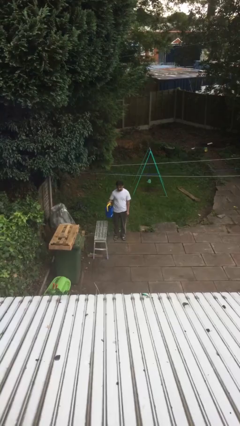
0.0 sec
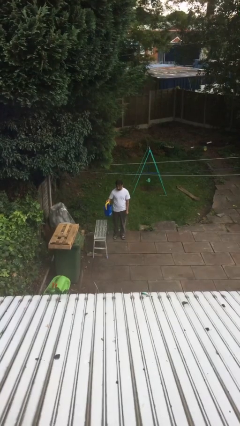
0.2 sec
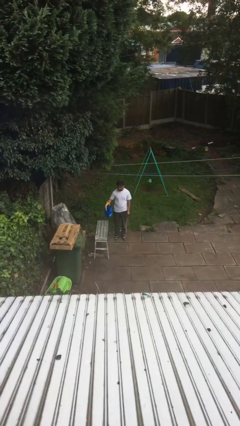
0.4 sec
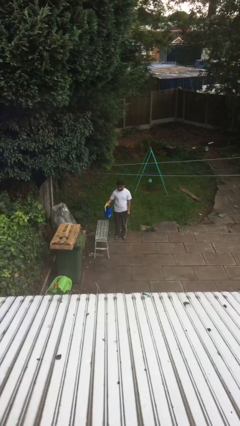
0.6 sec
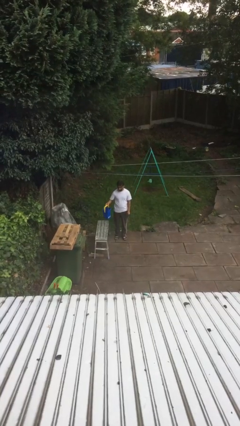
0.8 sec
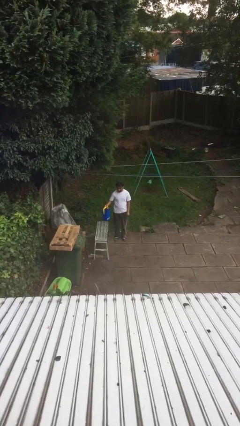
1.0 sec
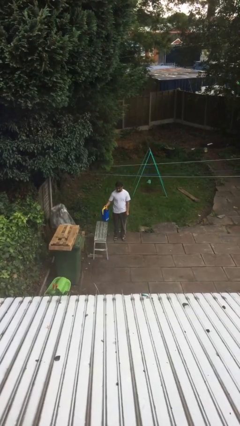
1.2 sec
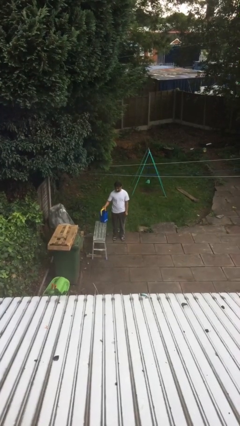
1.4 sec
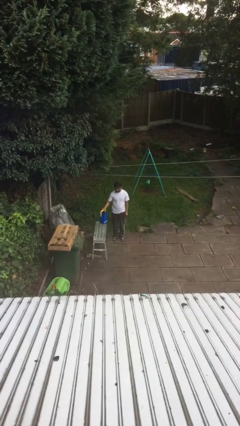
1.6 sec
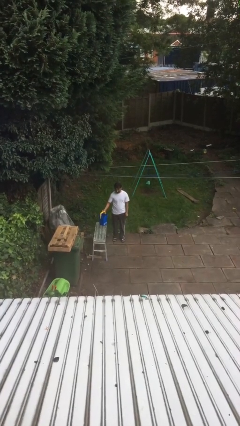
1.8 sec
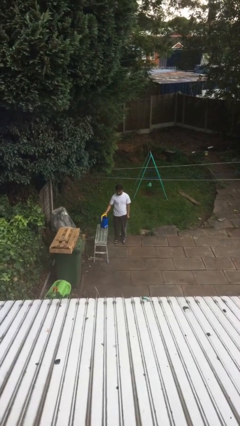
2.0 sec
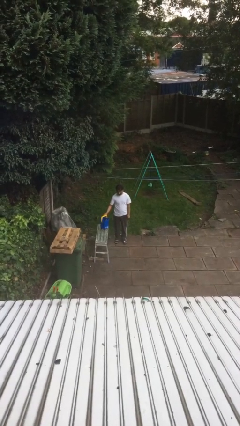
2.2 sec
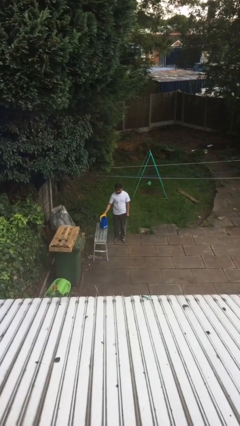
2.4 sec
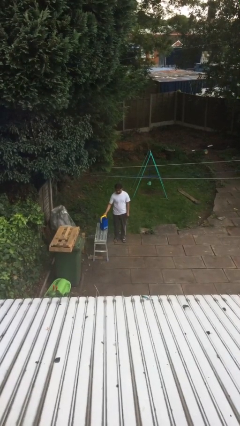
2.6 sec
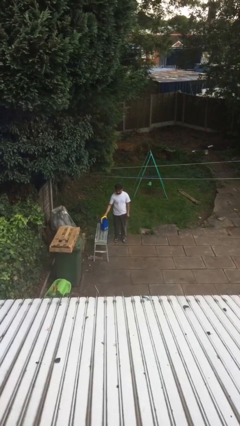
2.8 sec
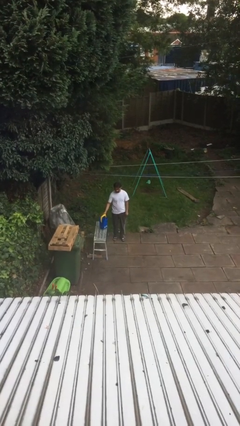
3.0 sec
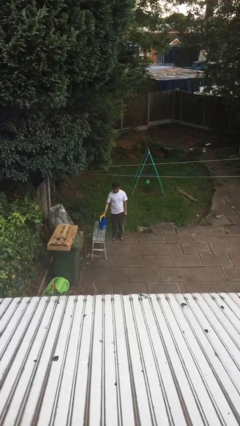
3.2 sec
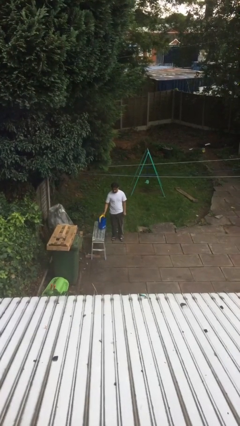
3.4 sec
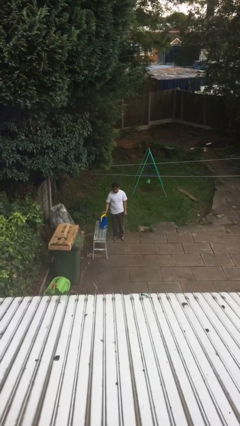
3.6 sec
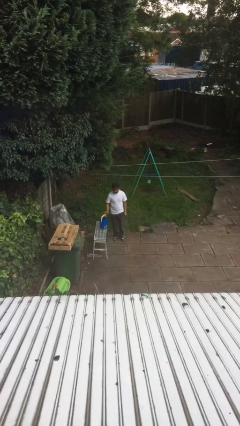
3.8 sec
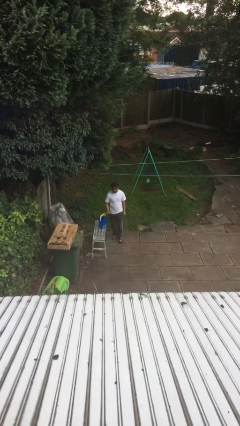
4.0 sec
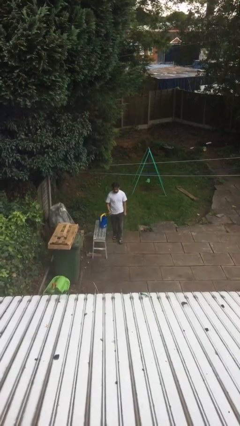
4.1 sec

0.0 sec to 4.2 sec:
person puts down object on table

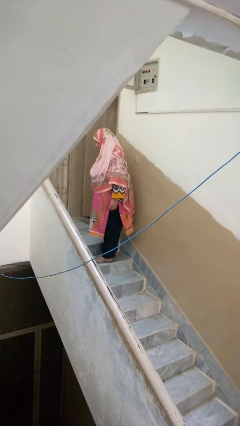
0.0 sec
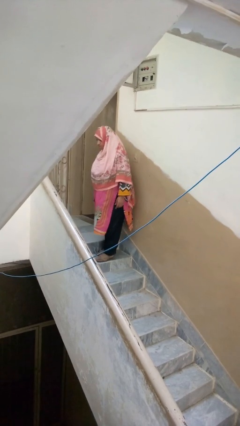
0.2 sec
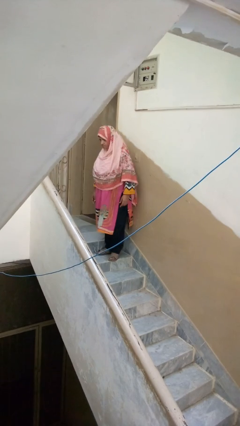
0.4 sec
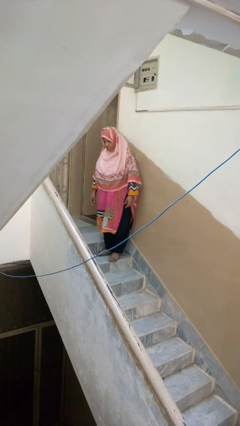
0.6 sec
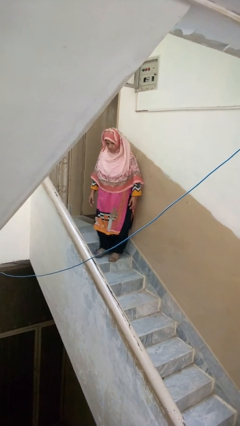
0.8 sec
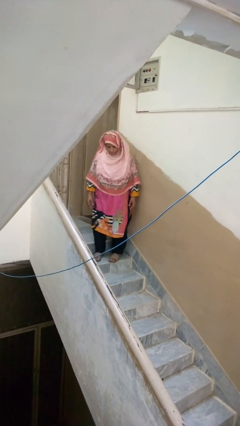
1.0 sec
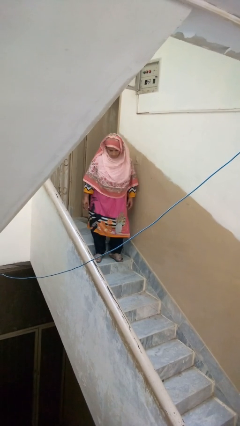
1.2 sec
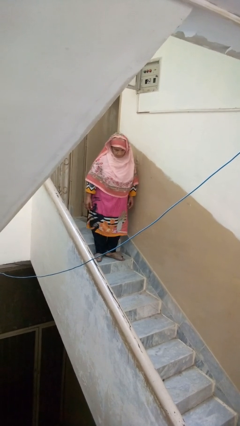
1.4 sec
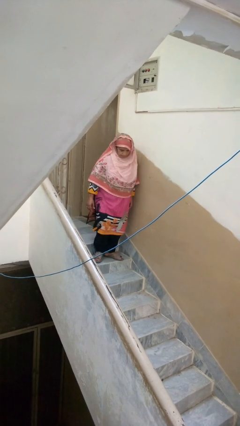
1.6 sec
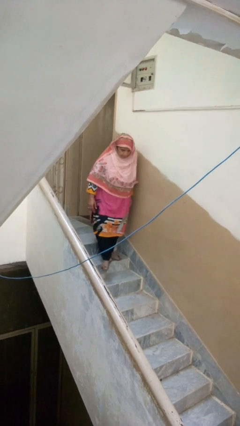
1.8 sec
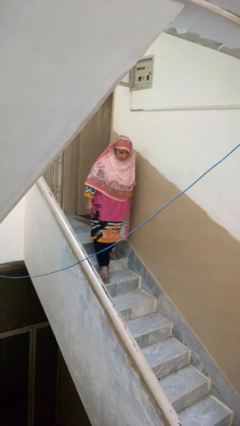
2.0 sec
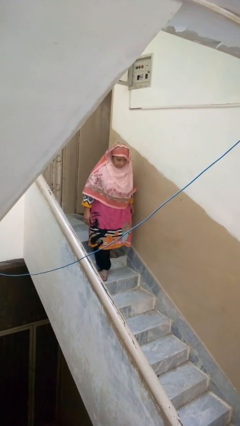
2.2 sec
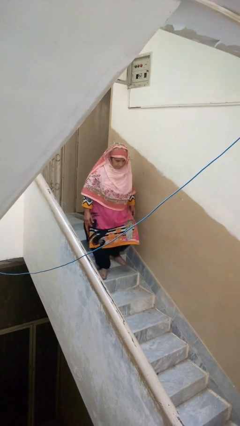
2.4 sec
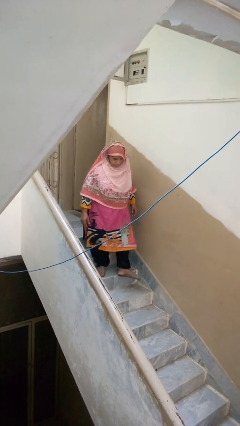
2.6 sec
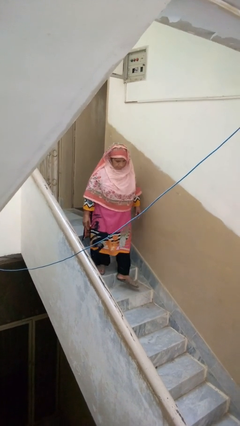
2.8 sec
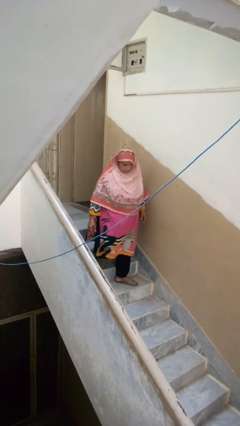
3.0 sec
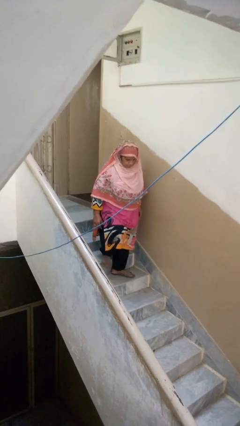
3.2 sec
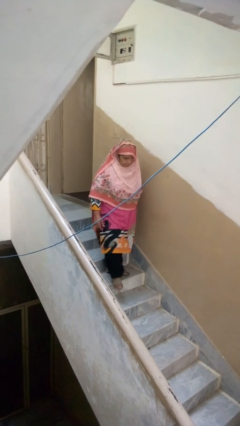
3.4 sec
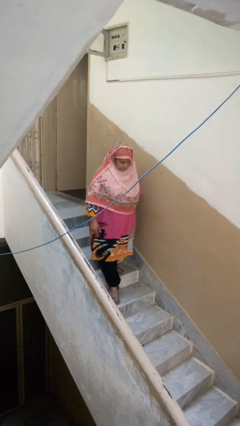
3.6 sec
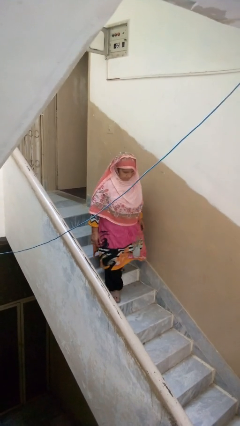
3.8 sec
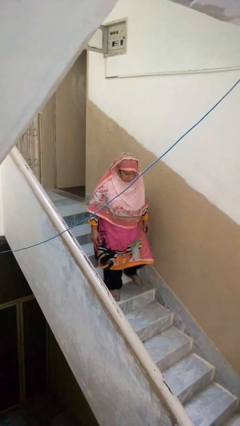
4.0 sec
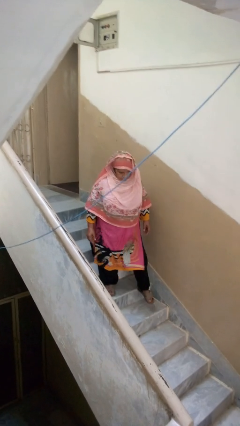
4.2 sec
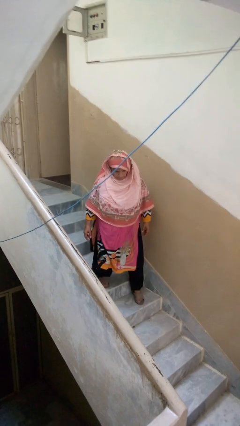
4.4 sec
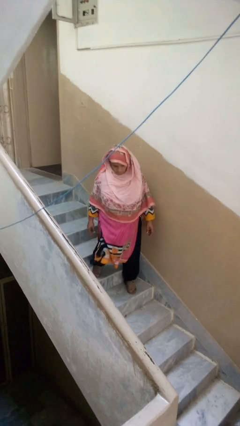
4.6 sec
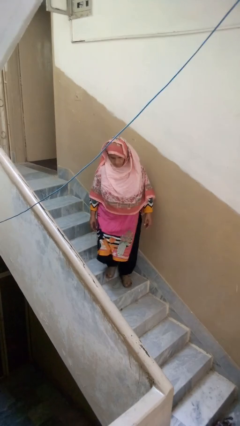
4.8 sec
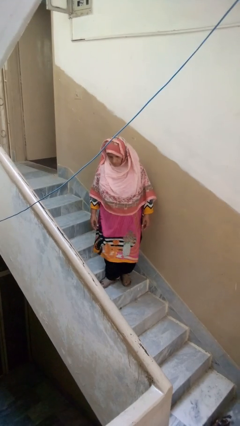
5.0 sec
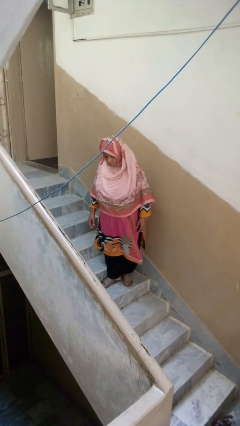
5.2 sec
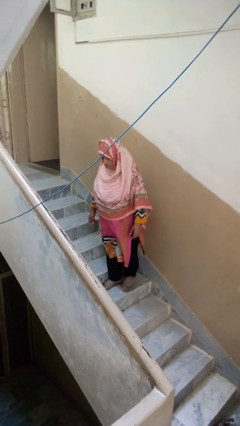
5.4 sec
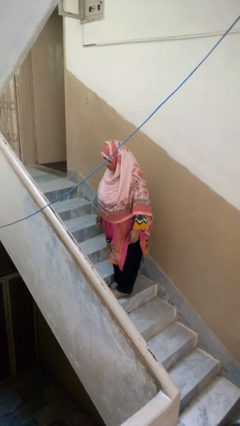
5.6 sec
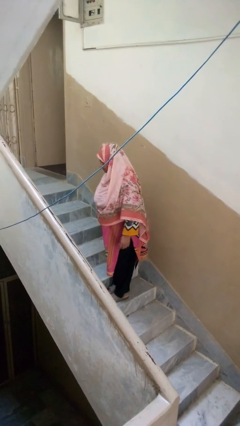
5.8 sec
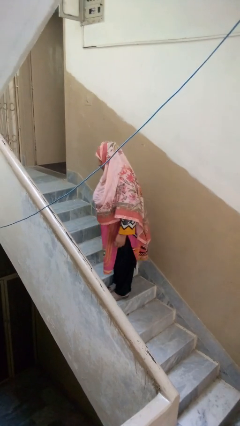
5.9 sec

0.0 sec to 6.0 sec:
person climbs down stairs

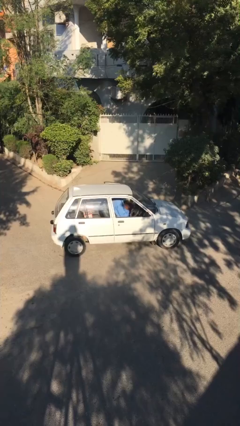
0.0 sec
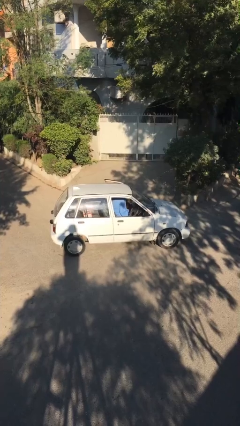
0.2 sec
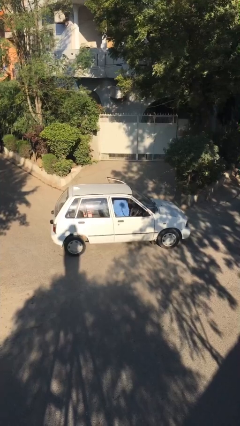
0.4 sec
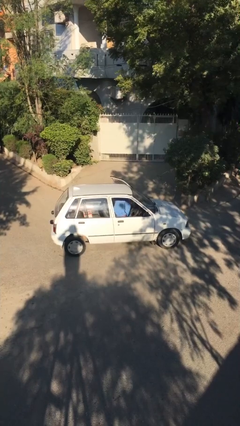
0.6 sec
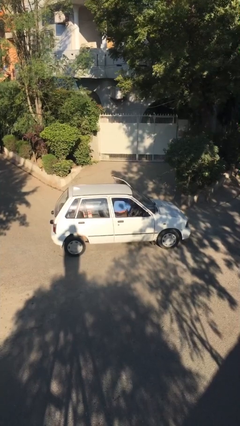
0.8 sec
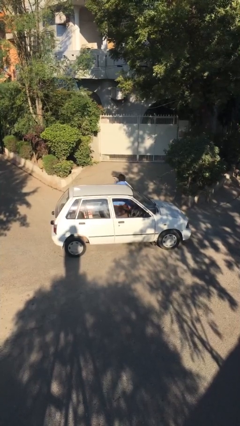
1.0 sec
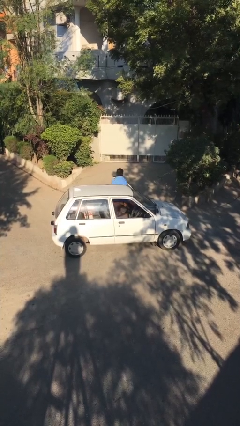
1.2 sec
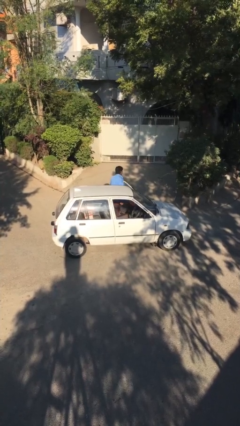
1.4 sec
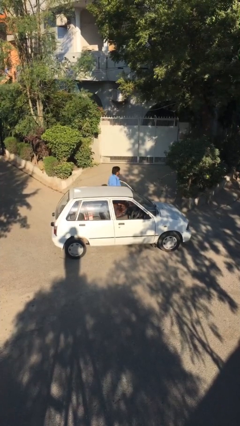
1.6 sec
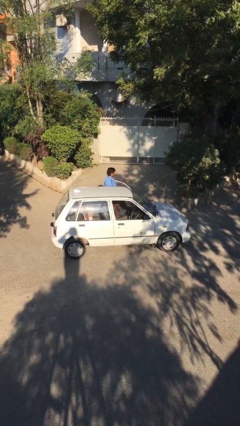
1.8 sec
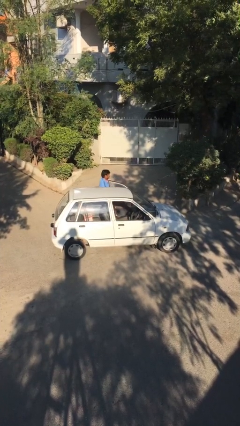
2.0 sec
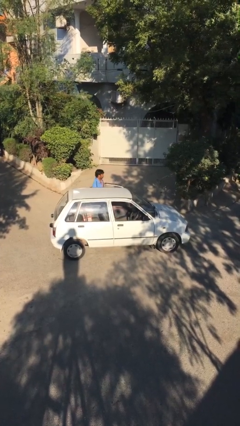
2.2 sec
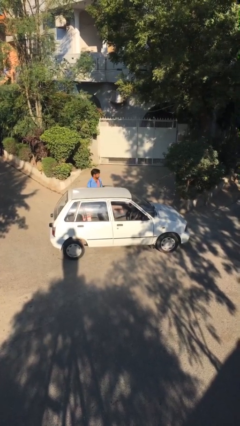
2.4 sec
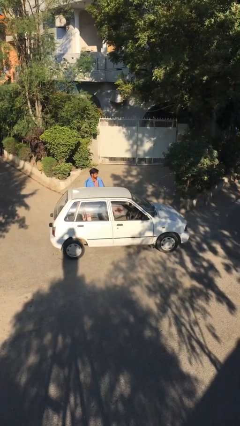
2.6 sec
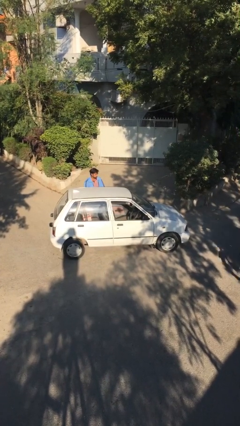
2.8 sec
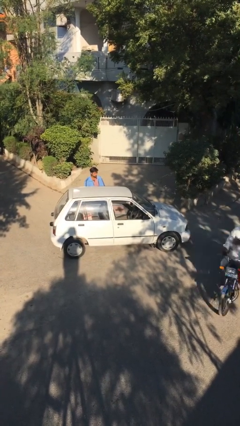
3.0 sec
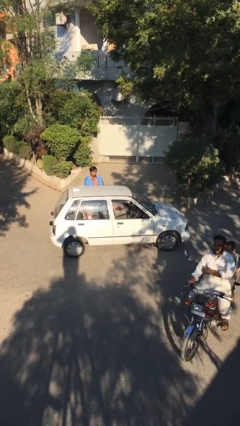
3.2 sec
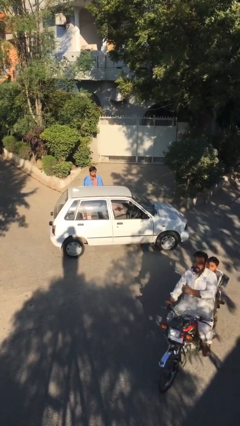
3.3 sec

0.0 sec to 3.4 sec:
car drops off person

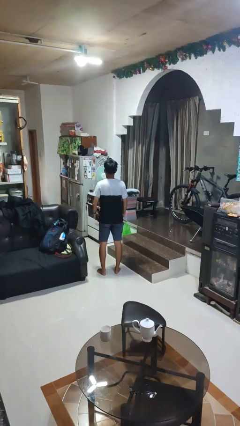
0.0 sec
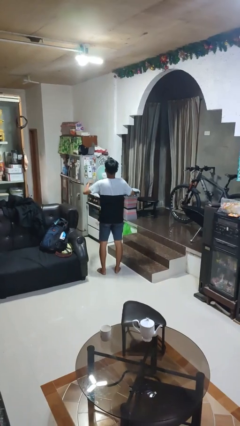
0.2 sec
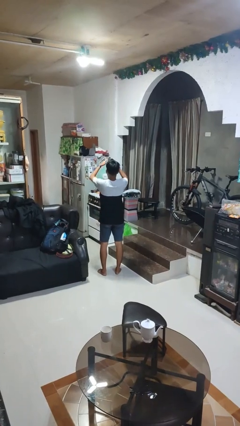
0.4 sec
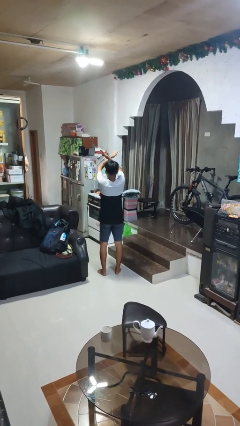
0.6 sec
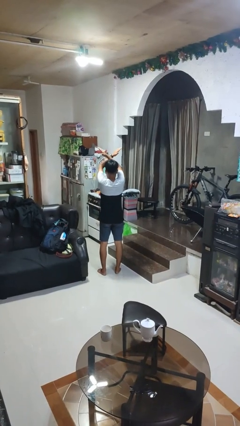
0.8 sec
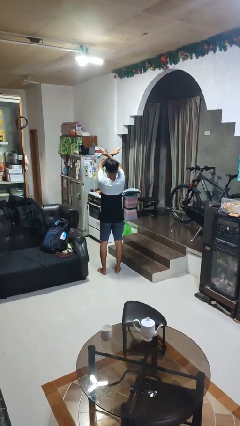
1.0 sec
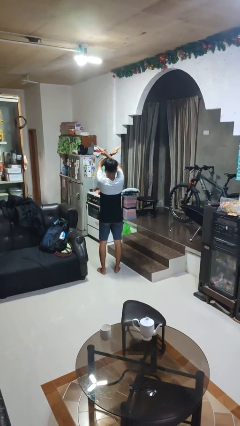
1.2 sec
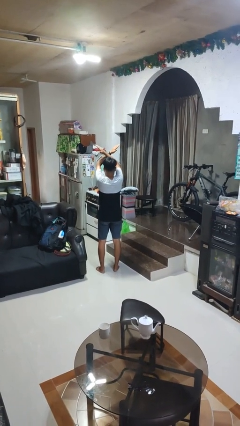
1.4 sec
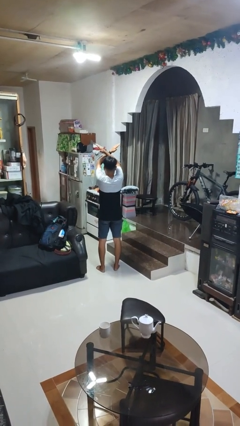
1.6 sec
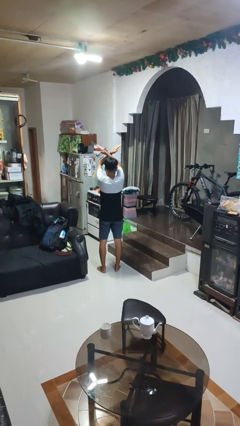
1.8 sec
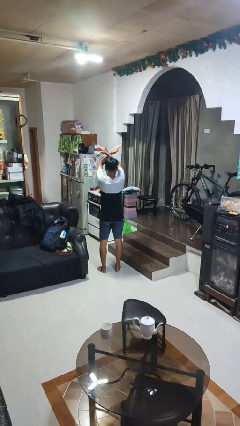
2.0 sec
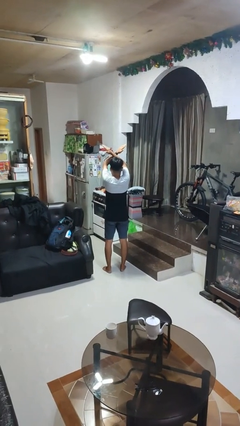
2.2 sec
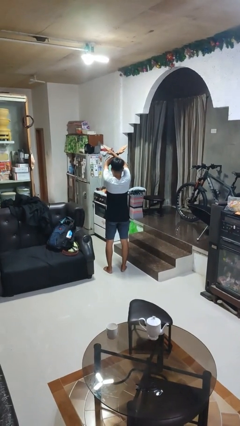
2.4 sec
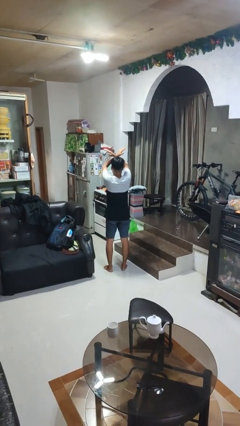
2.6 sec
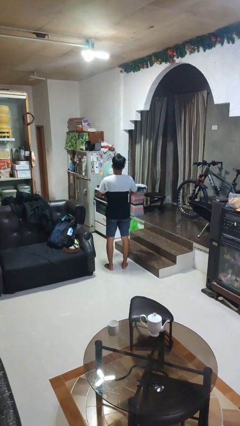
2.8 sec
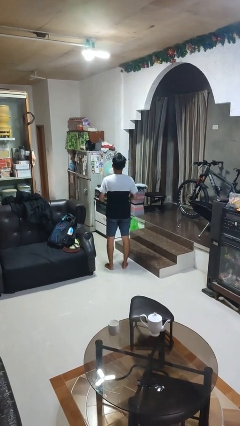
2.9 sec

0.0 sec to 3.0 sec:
person gestures arms x

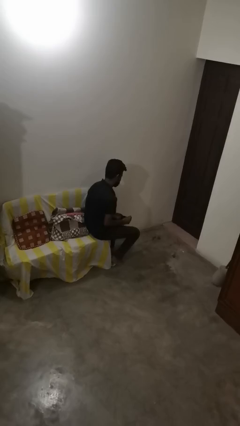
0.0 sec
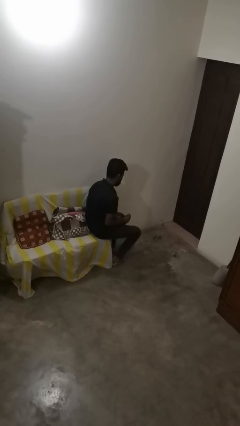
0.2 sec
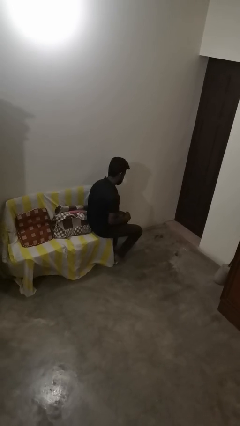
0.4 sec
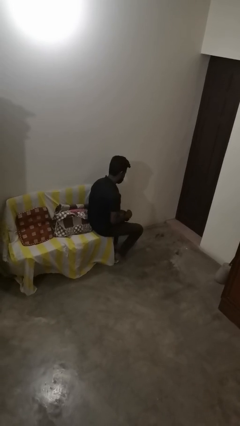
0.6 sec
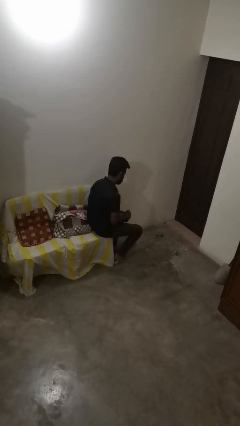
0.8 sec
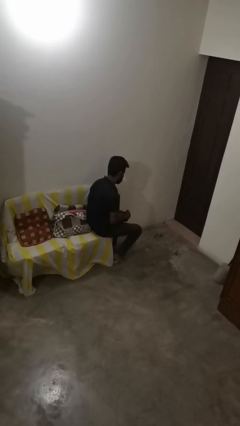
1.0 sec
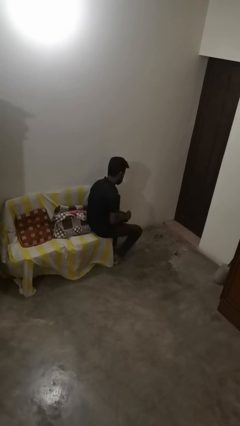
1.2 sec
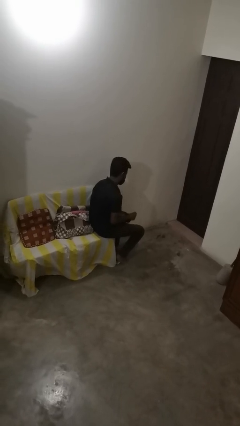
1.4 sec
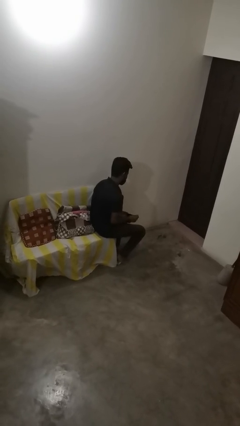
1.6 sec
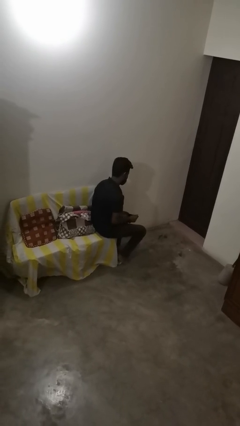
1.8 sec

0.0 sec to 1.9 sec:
person stirs mug
